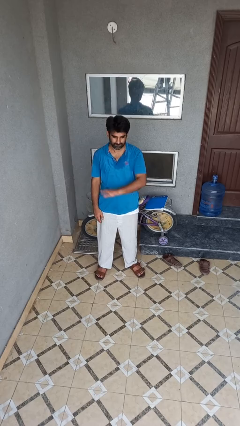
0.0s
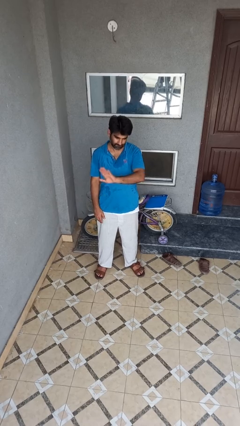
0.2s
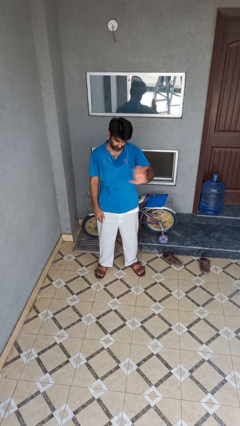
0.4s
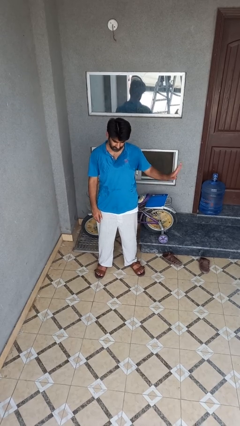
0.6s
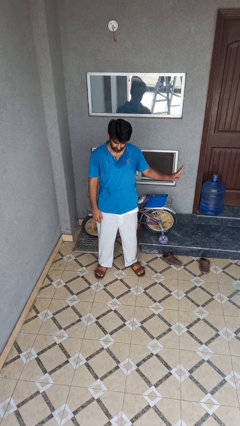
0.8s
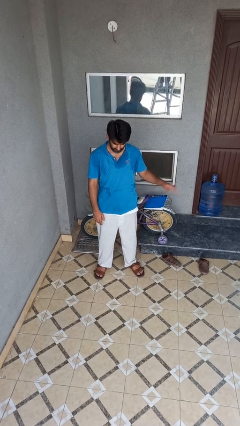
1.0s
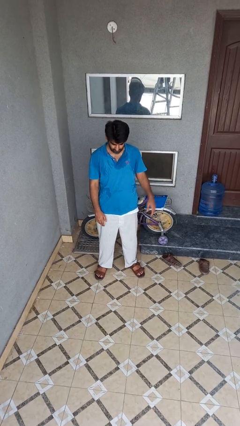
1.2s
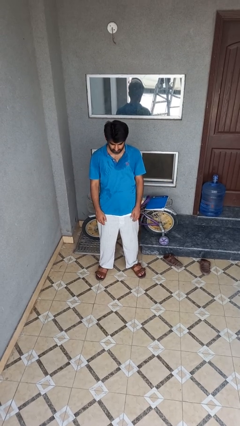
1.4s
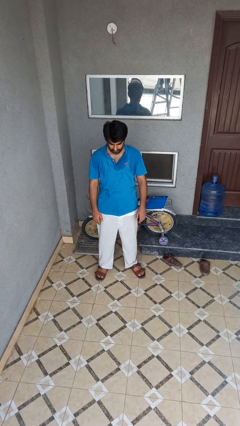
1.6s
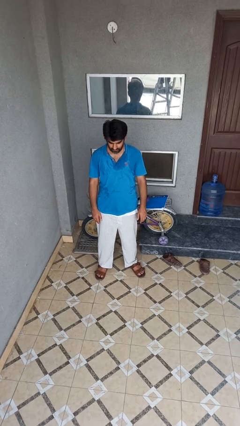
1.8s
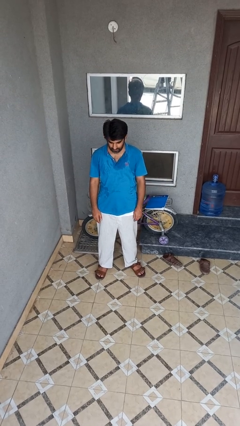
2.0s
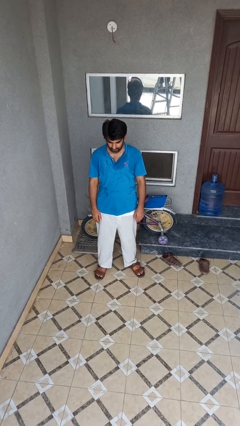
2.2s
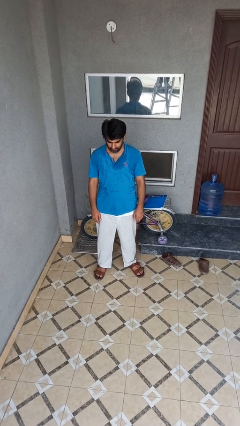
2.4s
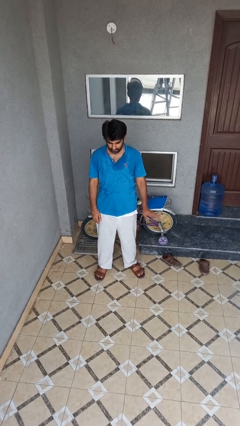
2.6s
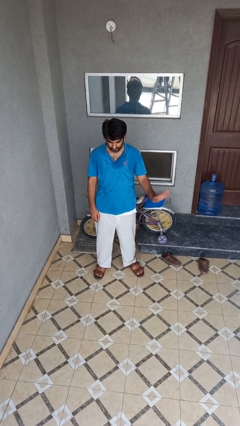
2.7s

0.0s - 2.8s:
person gestures swipe left

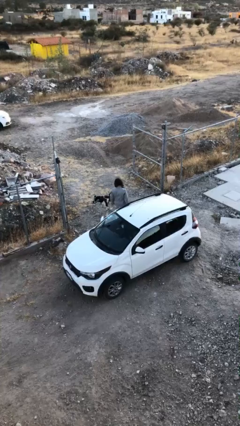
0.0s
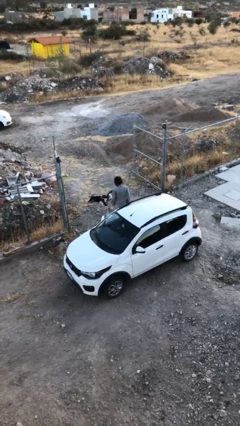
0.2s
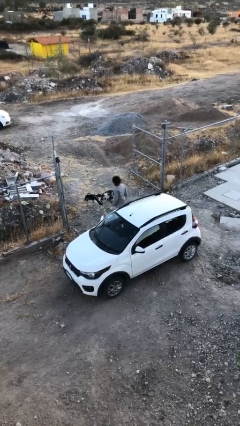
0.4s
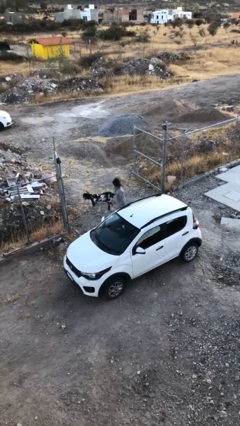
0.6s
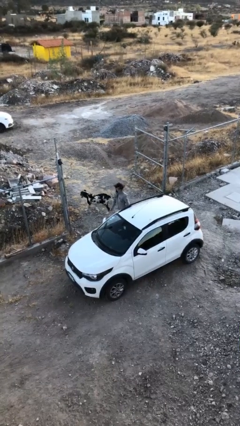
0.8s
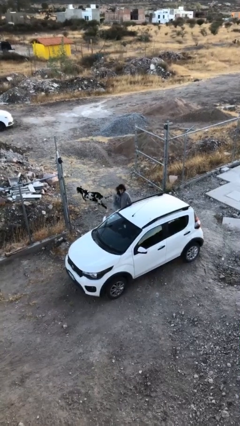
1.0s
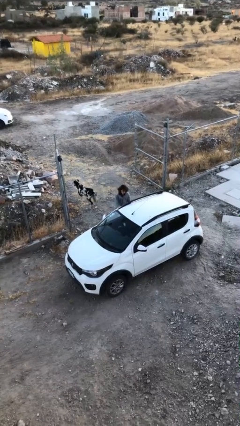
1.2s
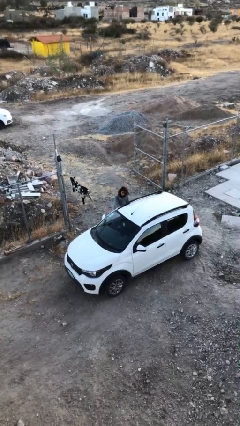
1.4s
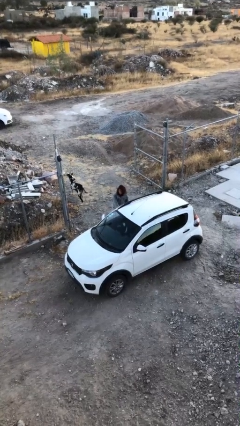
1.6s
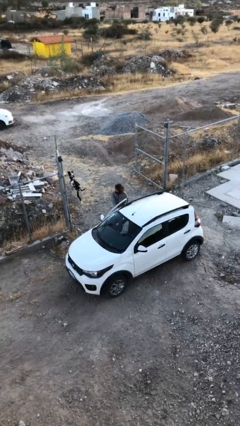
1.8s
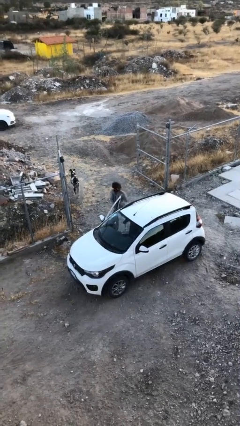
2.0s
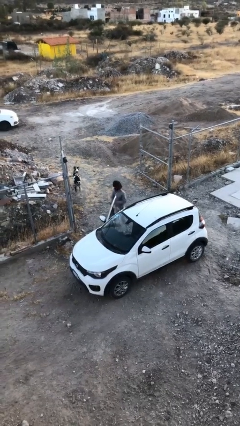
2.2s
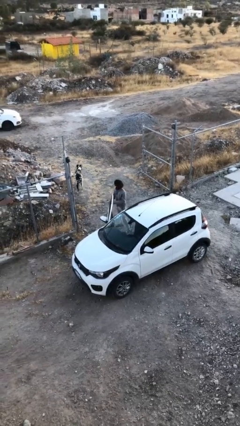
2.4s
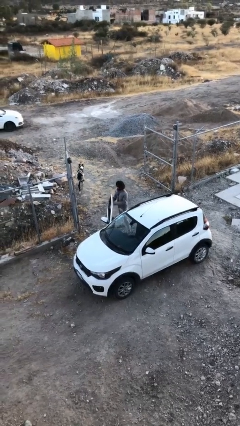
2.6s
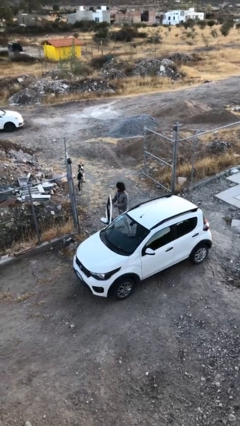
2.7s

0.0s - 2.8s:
person opens car door

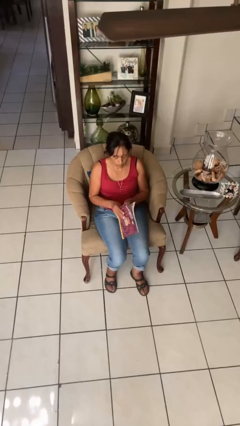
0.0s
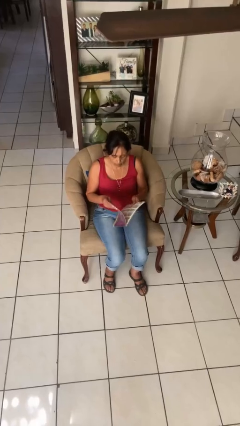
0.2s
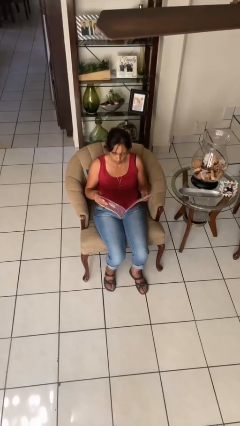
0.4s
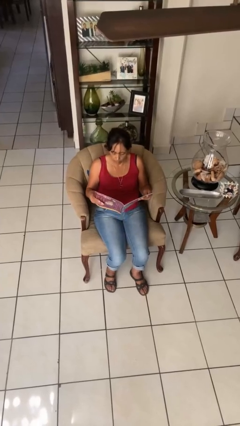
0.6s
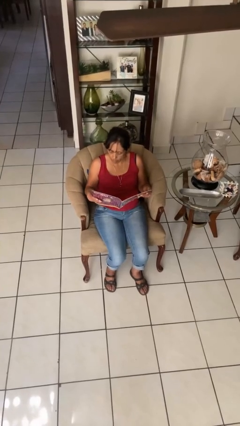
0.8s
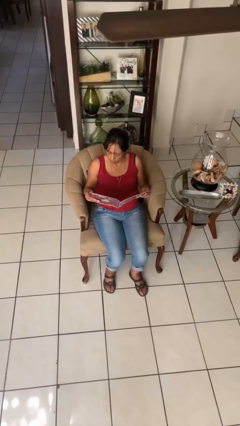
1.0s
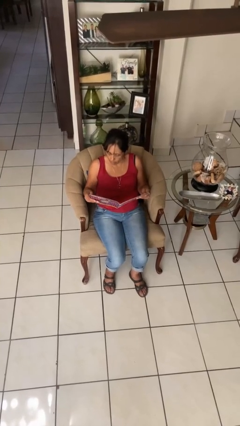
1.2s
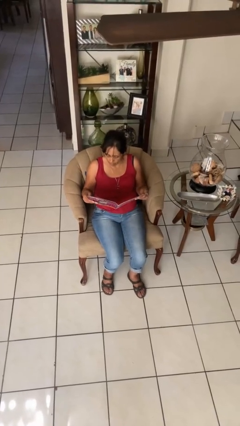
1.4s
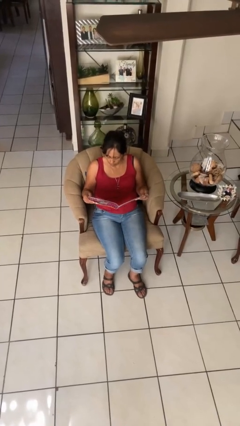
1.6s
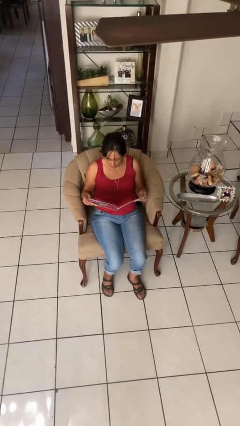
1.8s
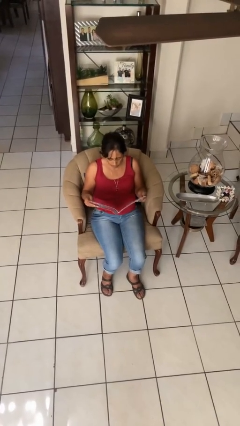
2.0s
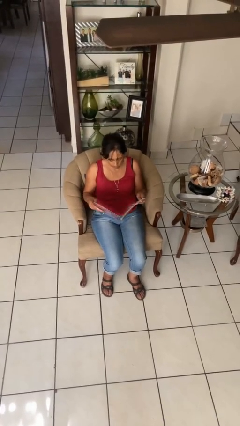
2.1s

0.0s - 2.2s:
person reads magazine

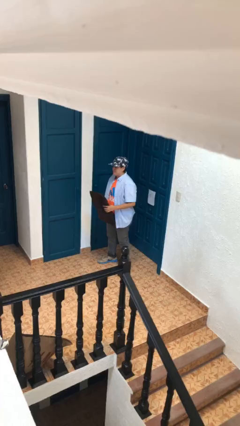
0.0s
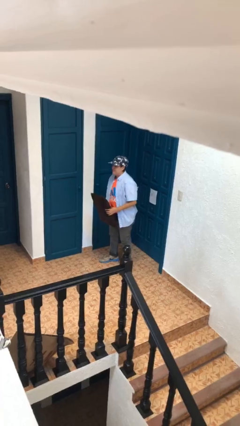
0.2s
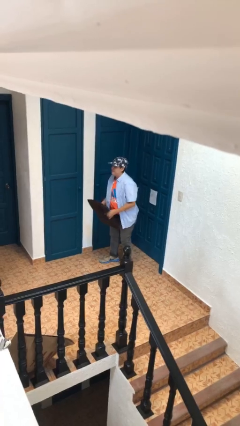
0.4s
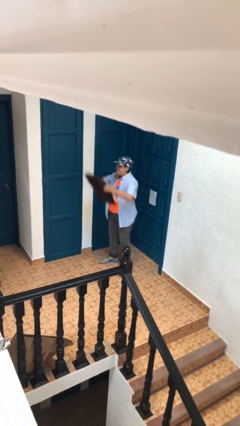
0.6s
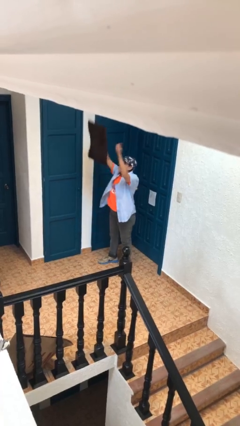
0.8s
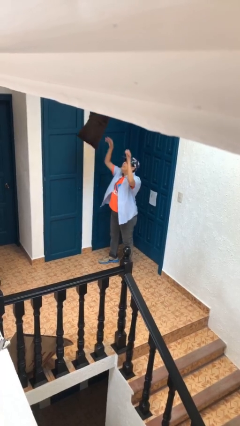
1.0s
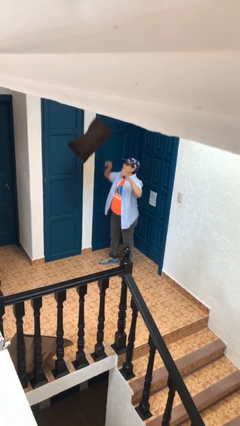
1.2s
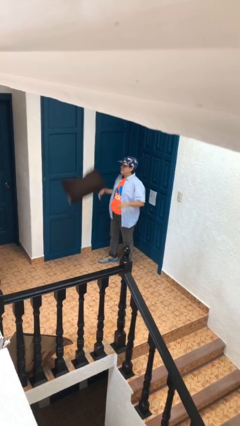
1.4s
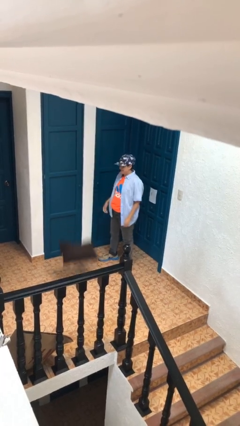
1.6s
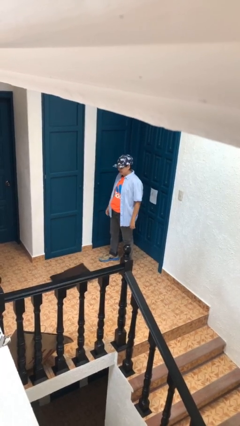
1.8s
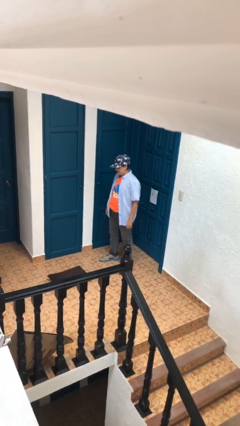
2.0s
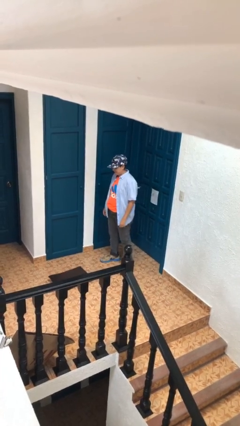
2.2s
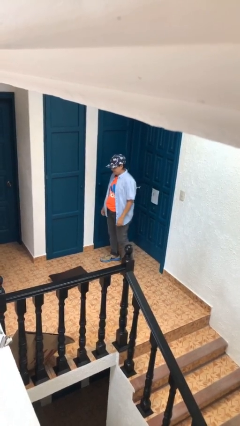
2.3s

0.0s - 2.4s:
person throws object into air

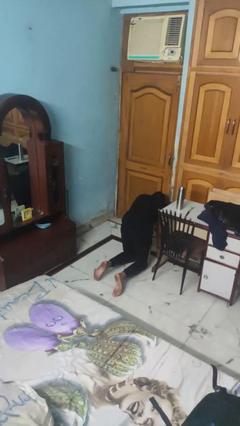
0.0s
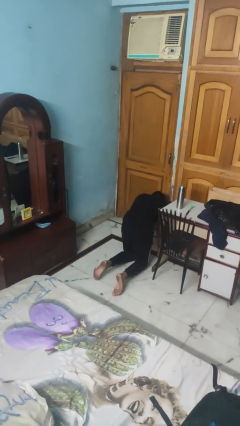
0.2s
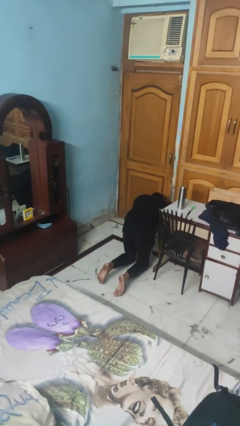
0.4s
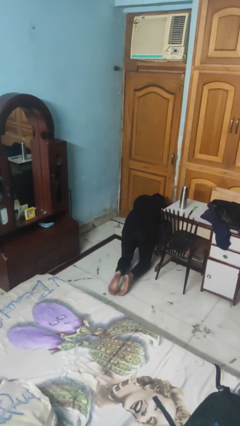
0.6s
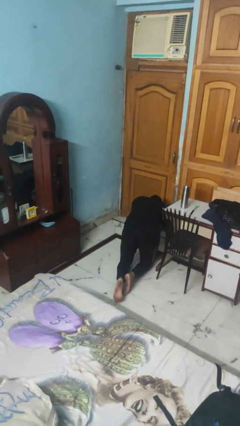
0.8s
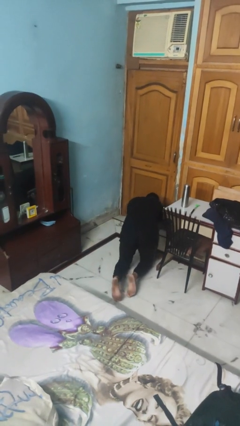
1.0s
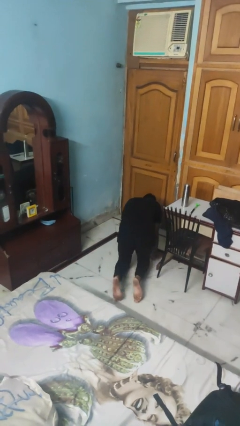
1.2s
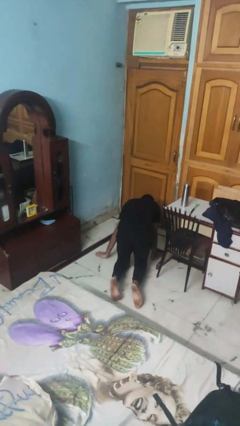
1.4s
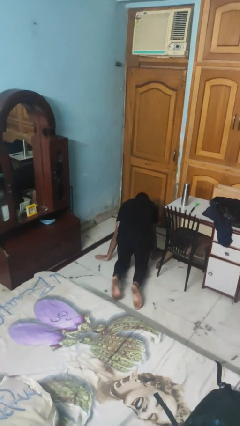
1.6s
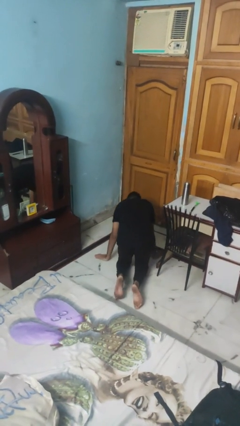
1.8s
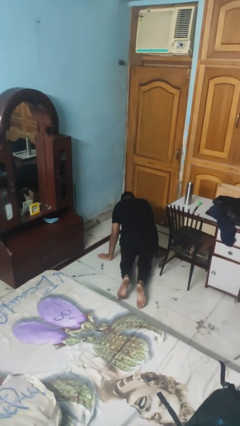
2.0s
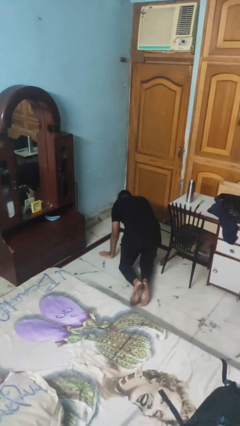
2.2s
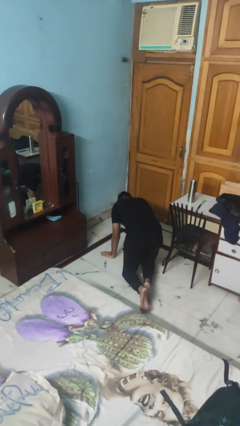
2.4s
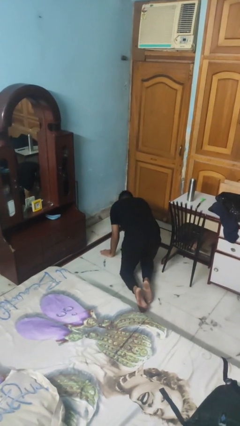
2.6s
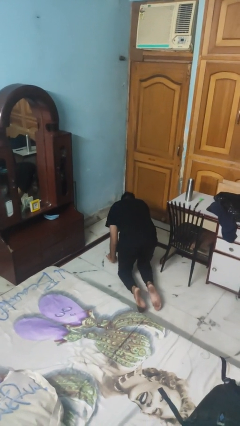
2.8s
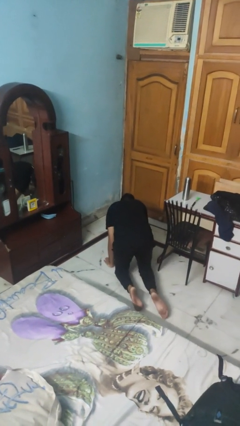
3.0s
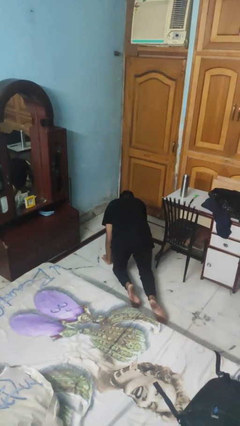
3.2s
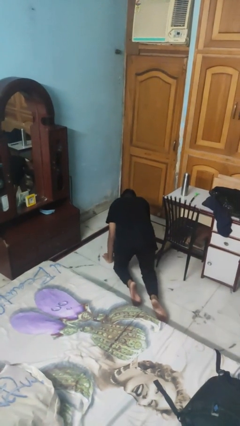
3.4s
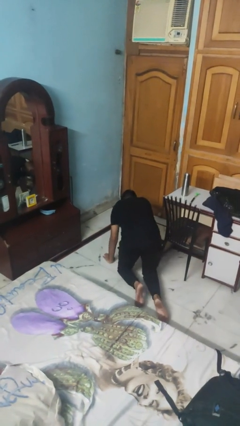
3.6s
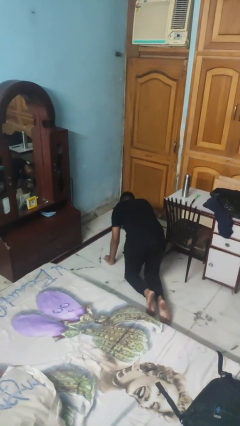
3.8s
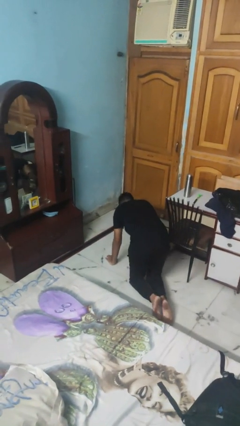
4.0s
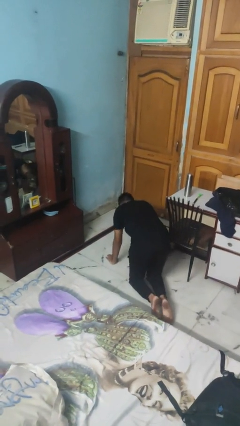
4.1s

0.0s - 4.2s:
person crawls

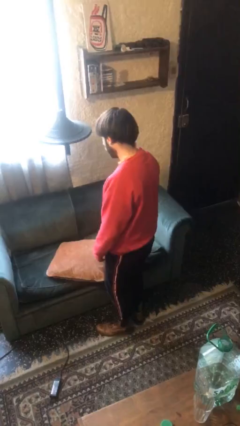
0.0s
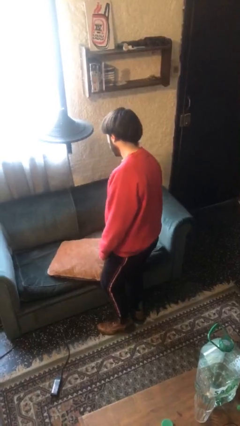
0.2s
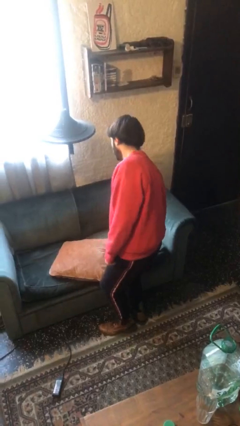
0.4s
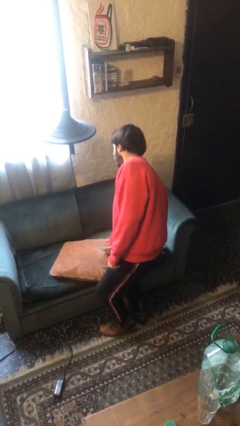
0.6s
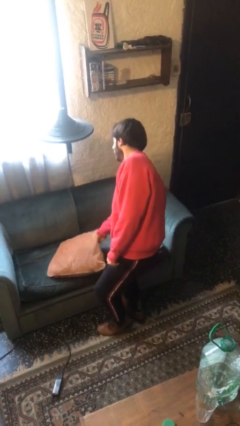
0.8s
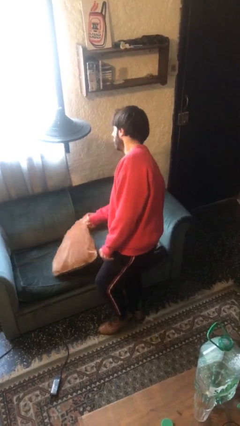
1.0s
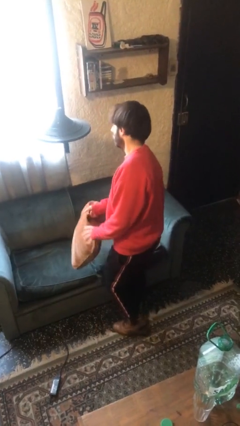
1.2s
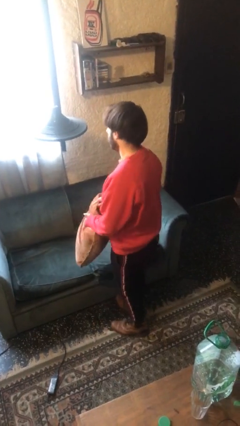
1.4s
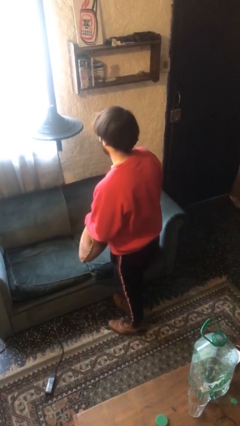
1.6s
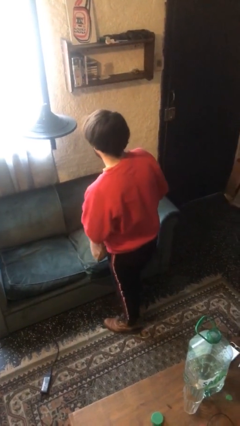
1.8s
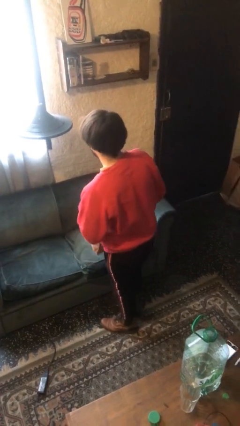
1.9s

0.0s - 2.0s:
person picks up object from couch

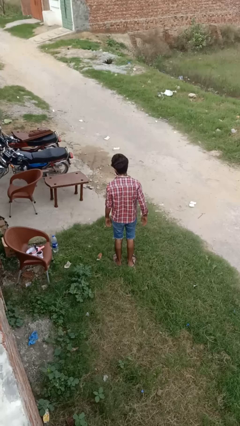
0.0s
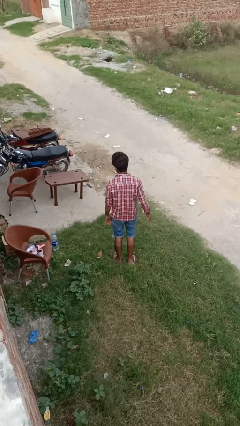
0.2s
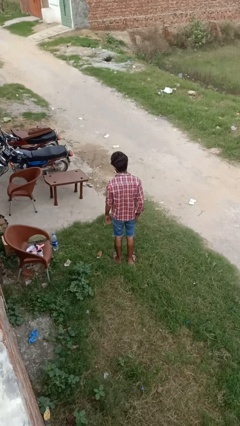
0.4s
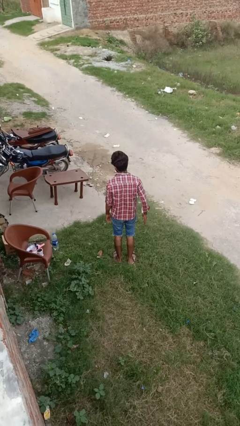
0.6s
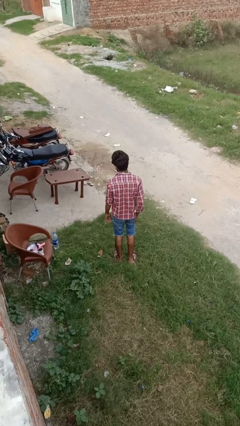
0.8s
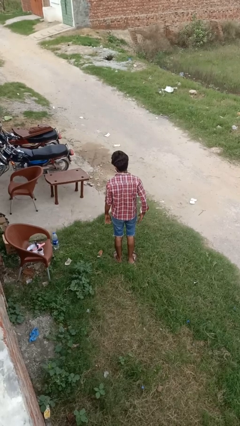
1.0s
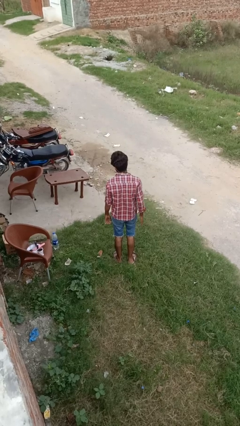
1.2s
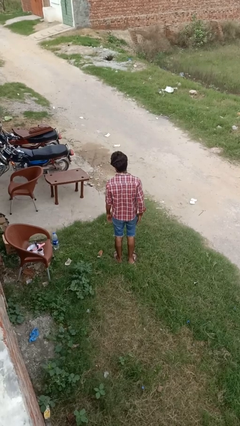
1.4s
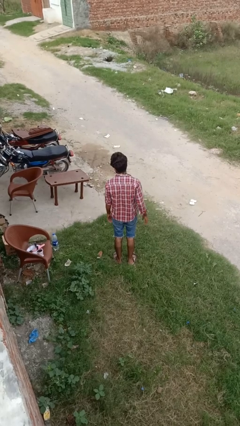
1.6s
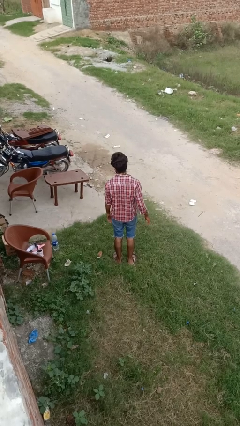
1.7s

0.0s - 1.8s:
person snaps fingers
